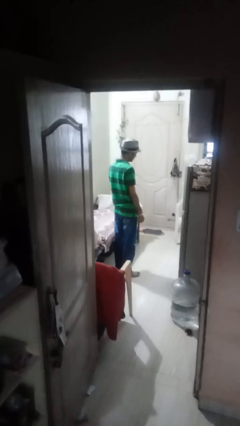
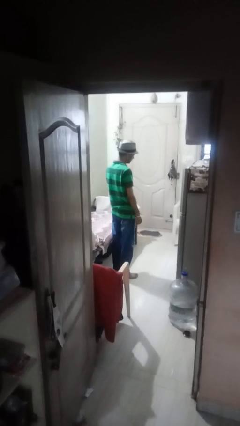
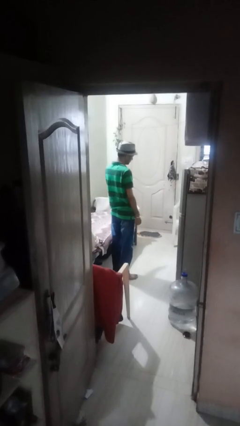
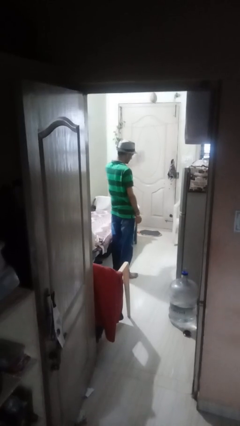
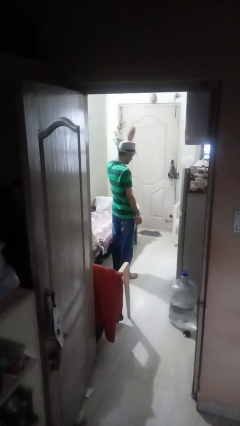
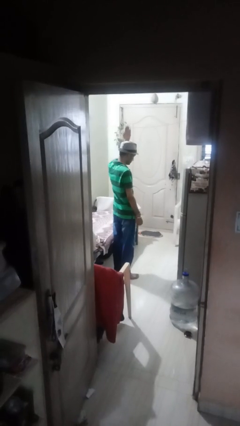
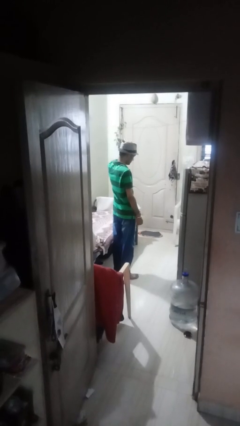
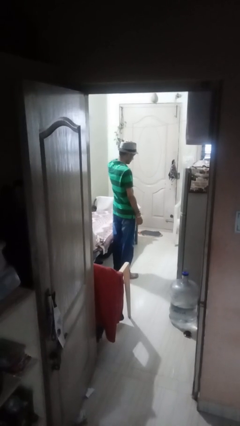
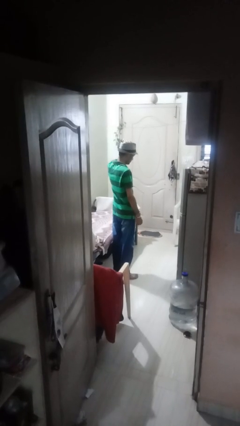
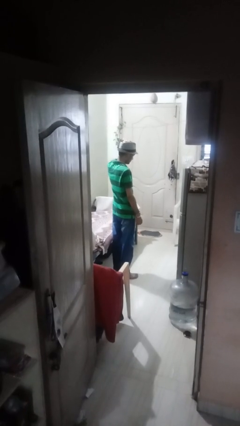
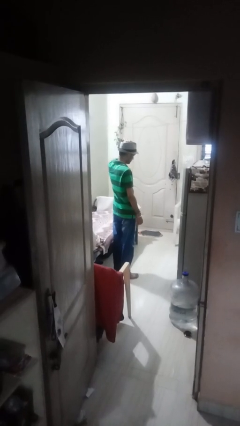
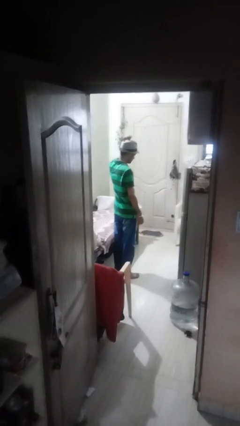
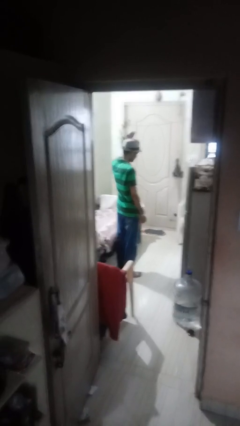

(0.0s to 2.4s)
person pats head

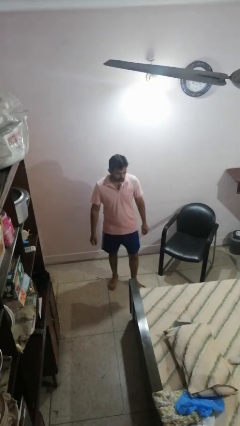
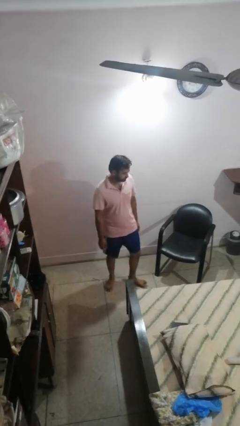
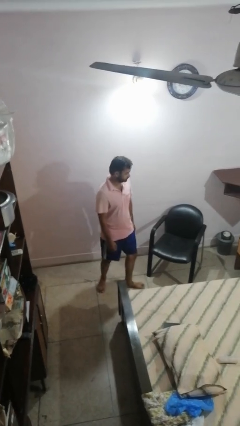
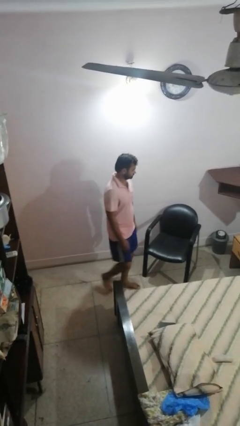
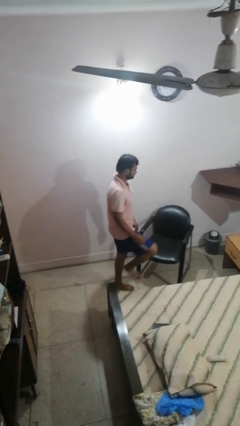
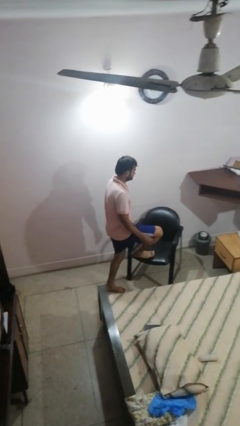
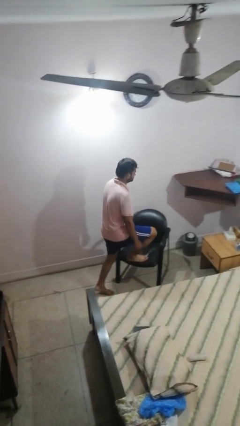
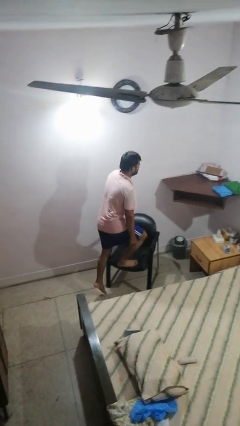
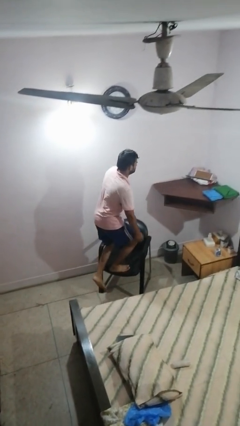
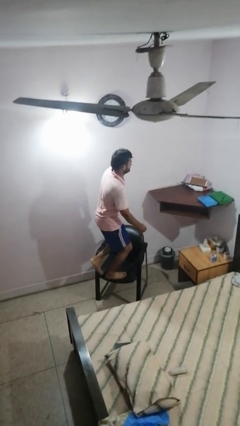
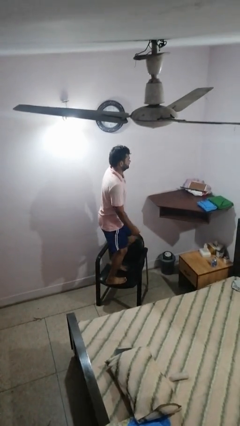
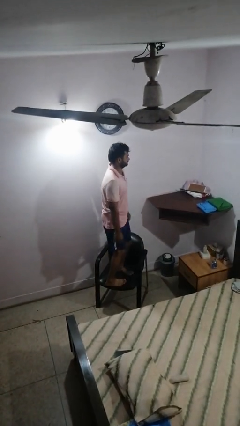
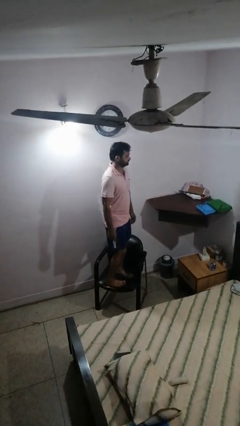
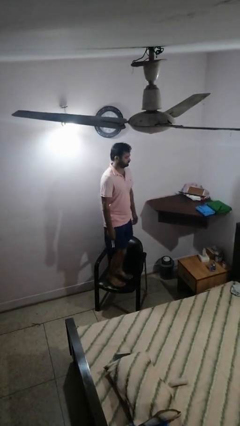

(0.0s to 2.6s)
person climbs on chair

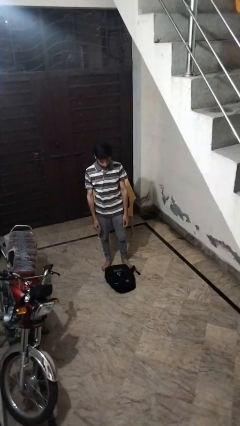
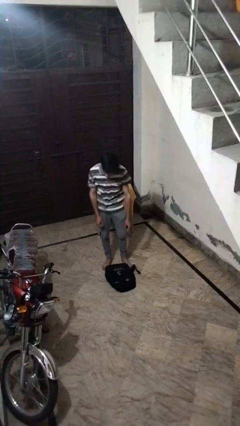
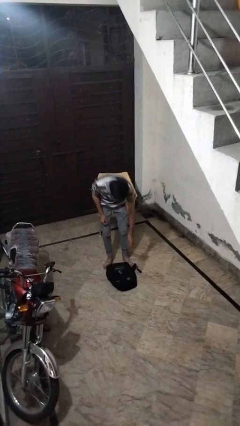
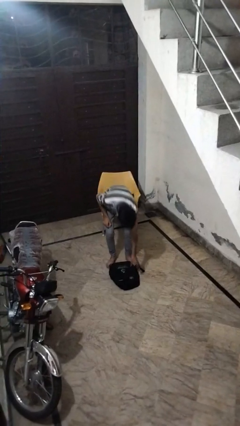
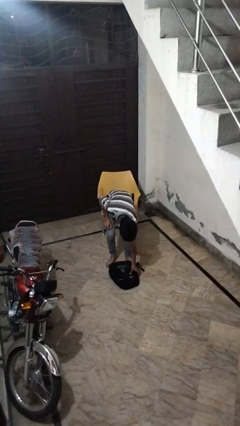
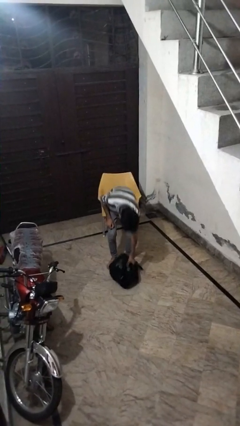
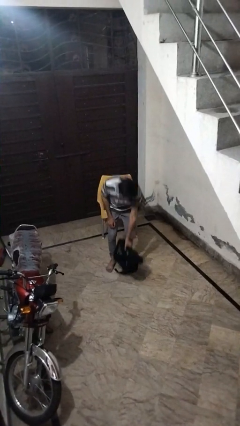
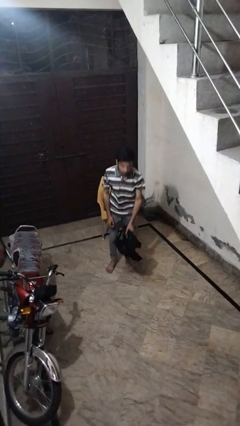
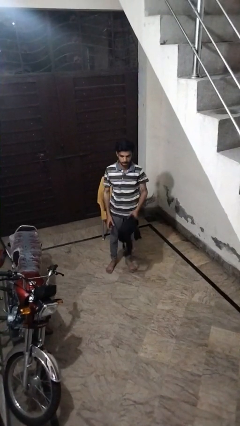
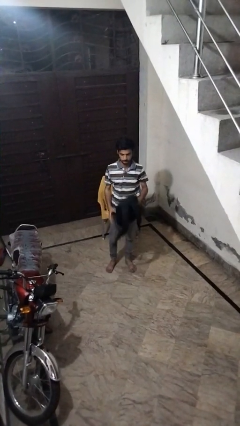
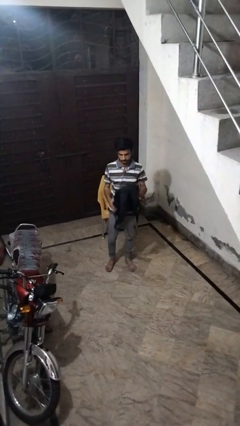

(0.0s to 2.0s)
person picks up object from floor

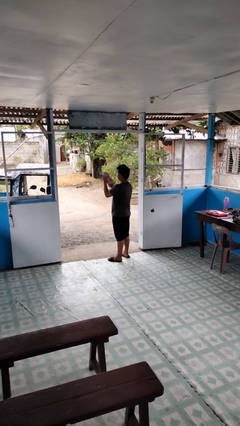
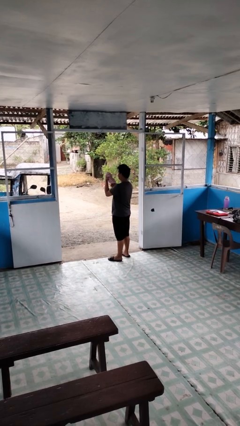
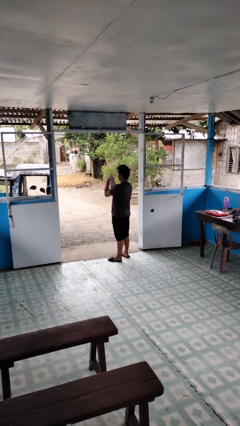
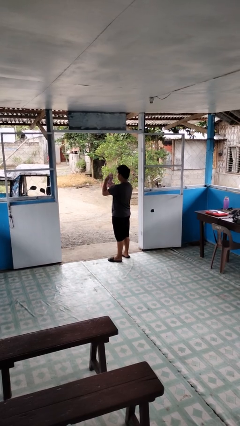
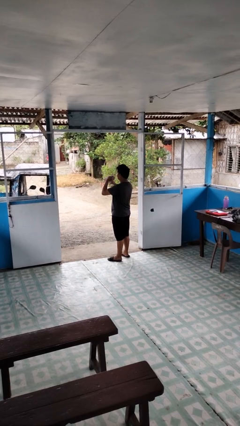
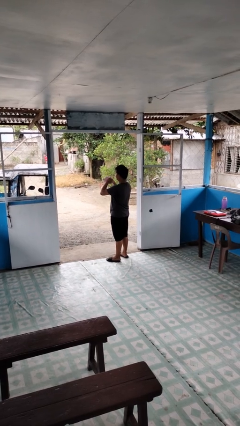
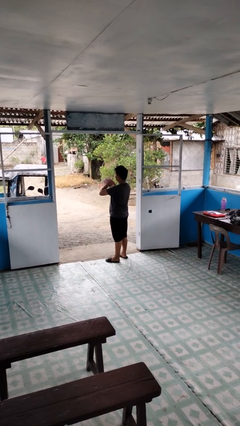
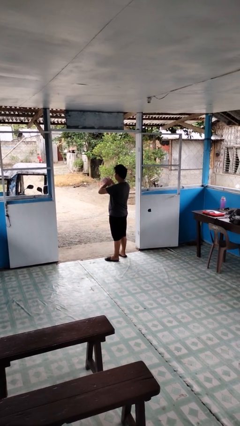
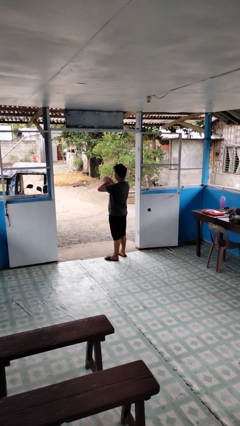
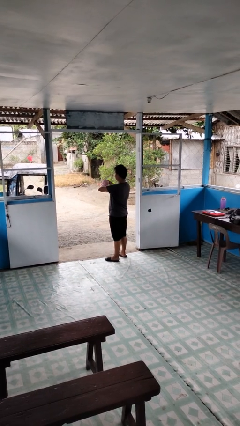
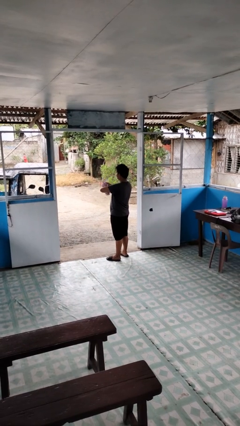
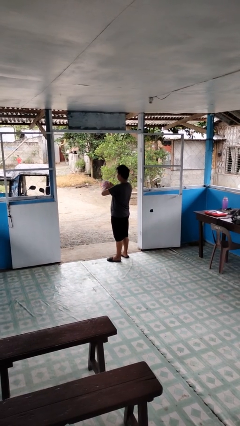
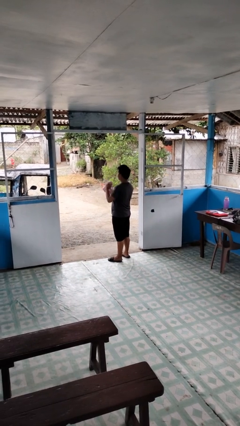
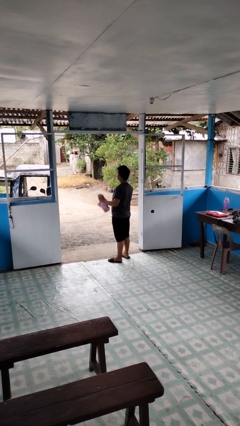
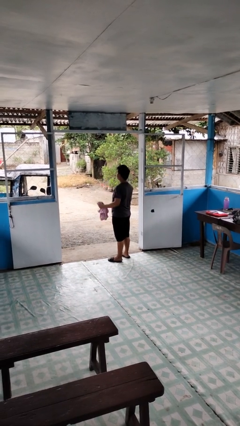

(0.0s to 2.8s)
person squeezes object

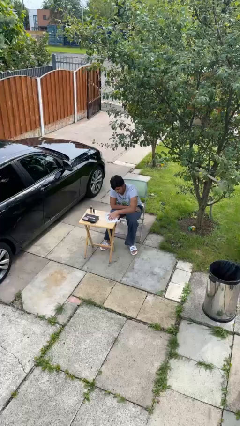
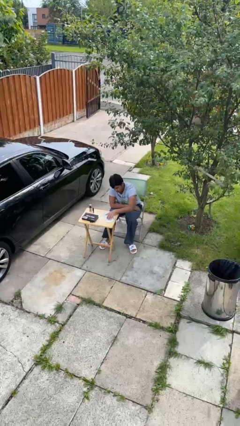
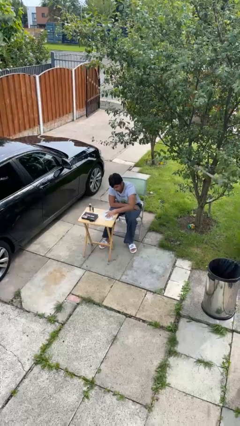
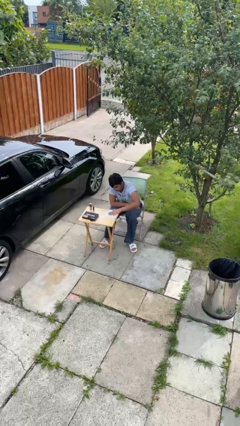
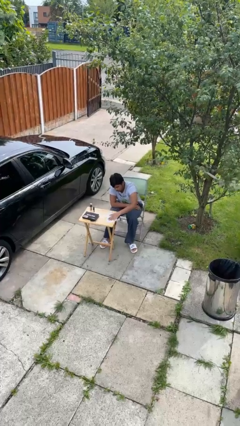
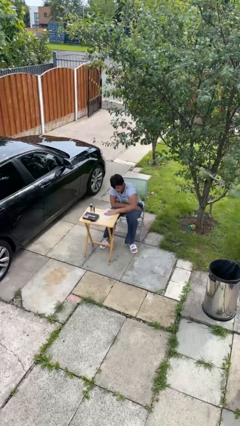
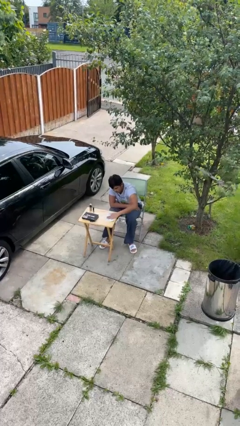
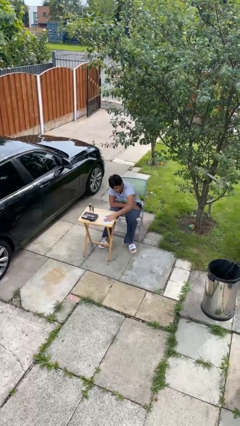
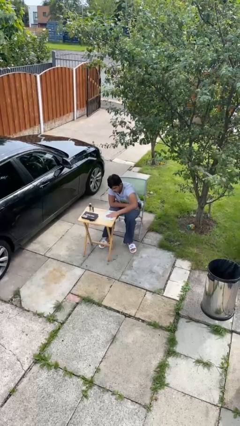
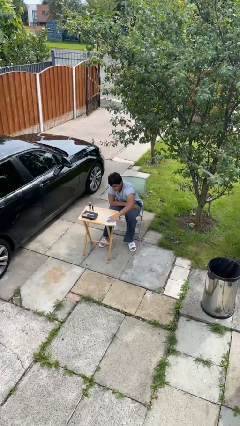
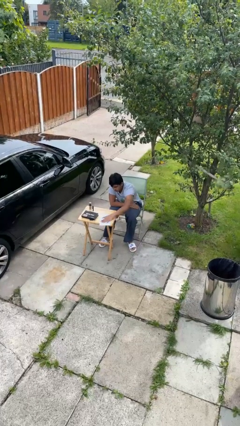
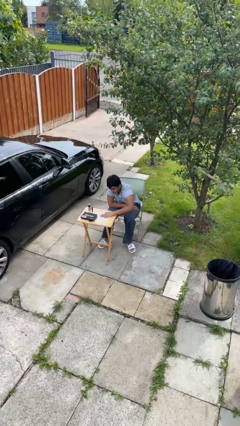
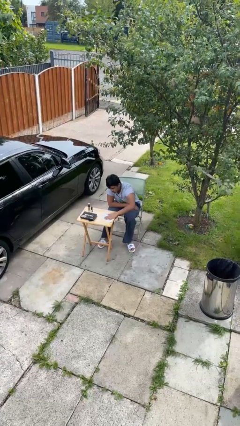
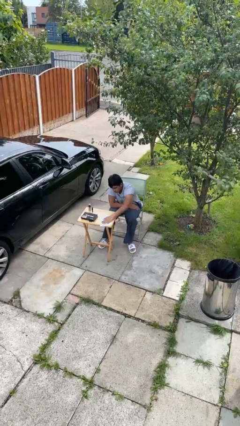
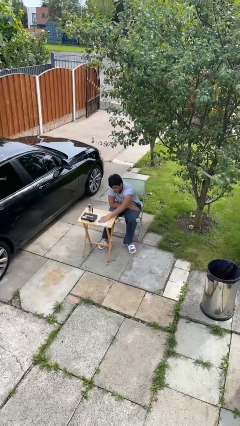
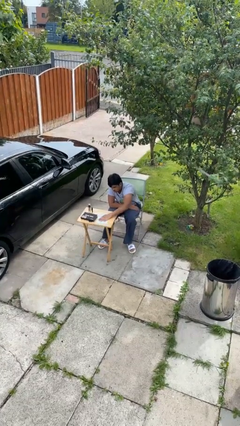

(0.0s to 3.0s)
person cleans table with rag

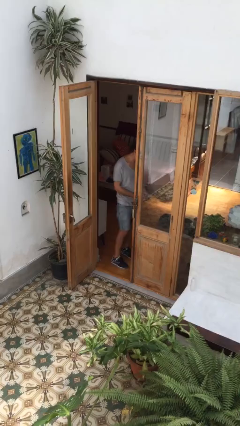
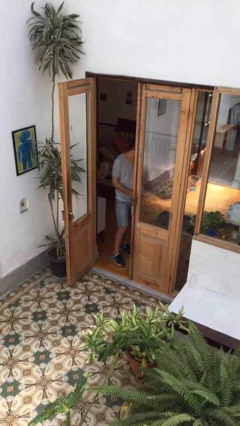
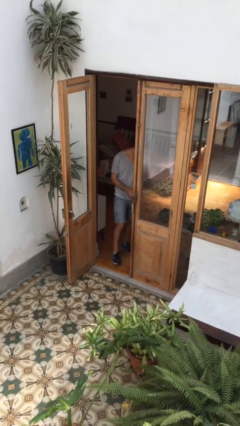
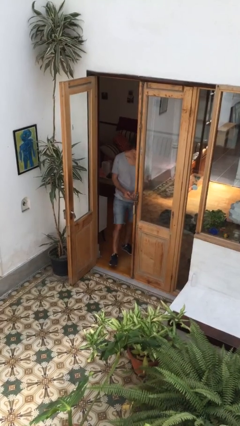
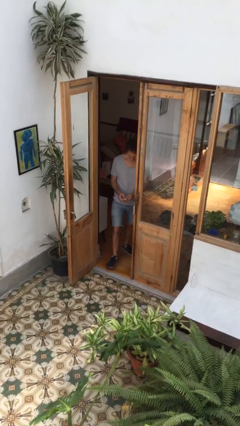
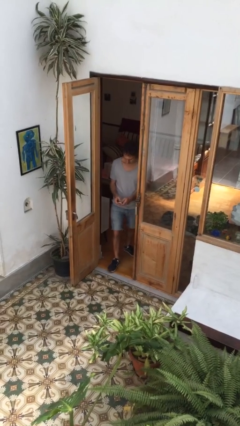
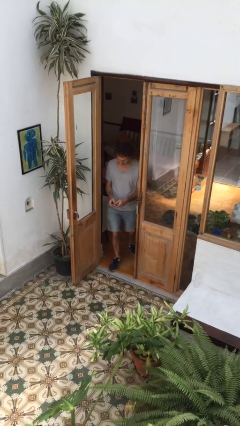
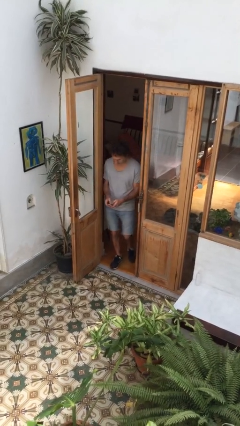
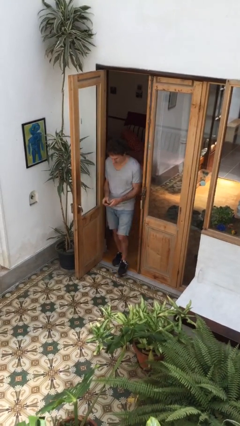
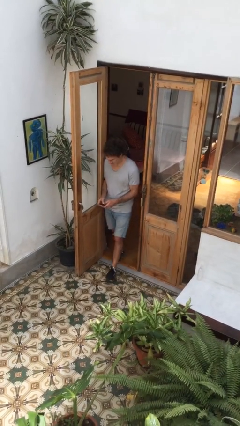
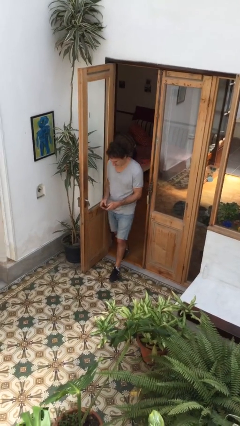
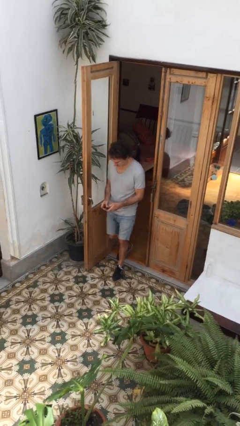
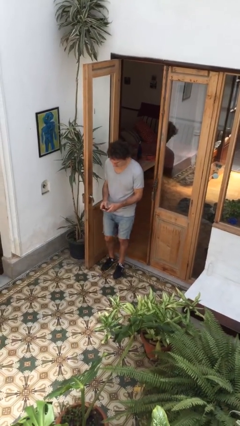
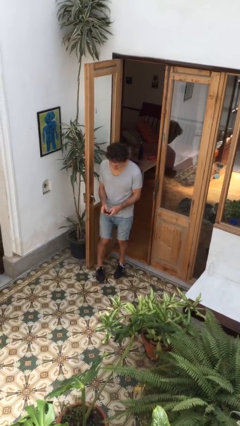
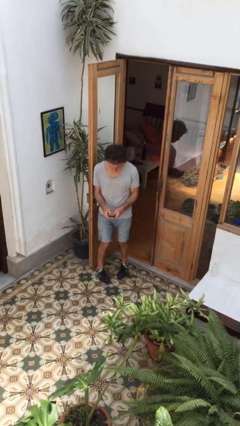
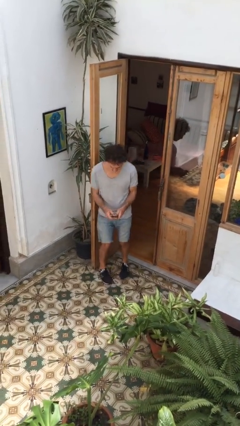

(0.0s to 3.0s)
person enters scene through structure

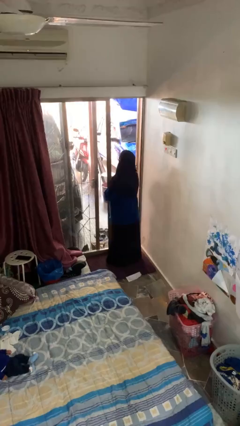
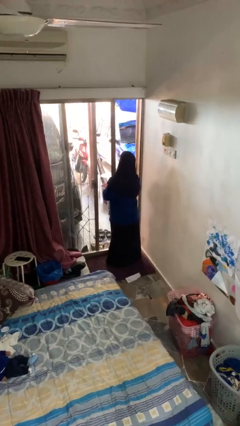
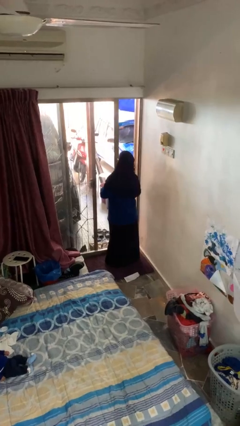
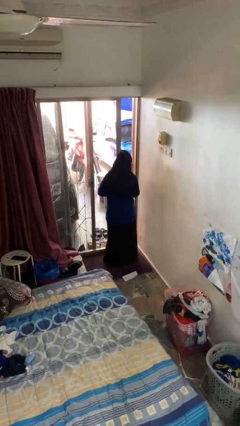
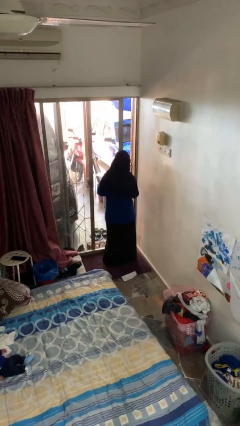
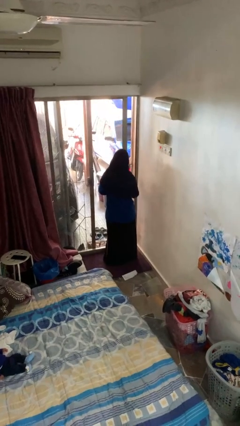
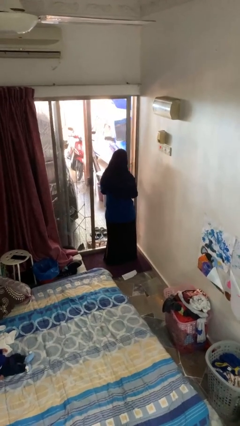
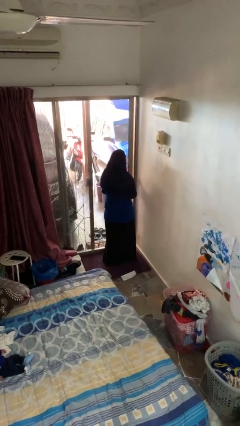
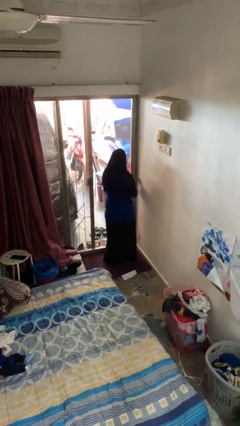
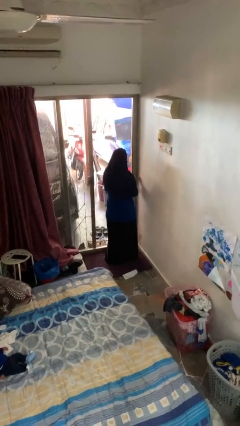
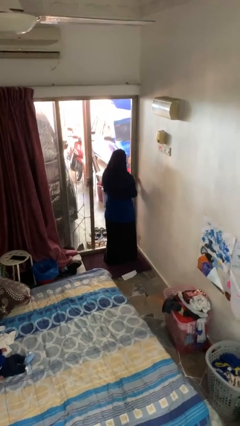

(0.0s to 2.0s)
person closes sliding door
